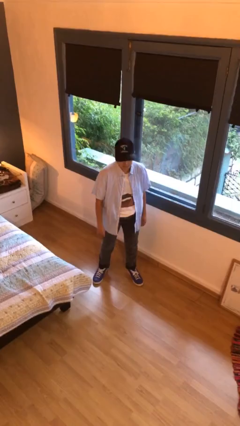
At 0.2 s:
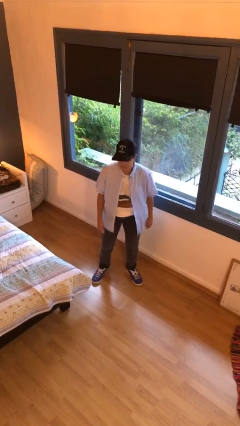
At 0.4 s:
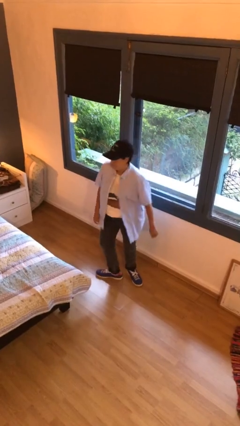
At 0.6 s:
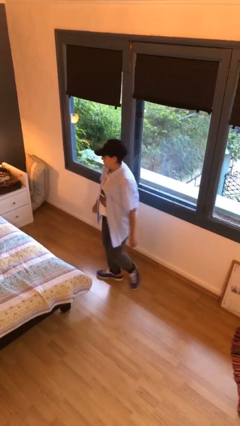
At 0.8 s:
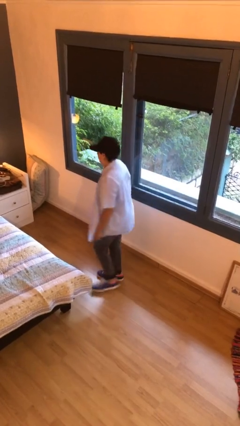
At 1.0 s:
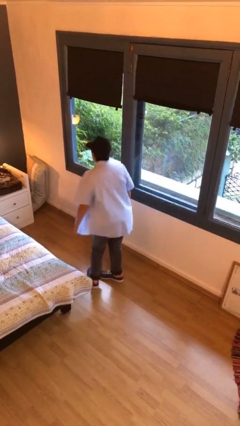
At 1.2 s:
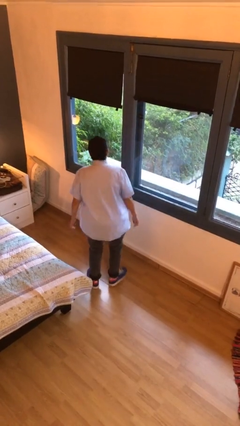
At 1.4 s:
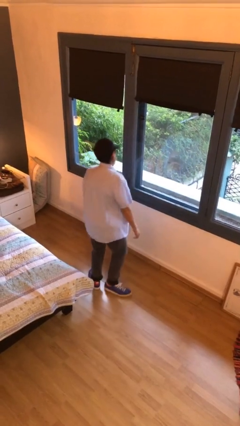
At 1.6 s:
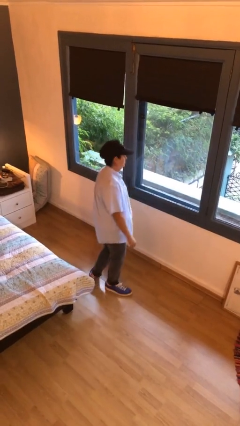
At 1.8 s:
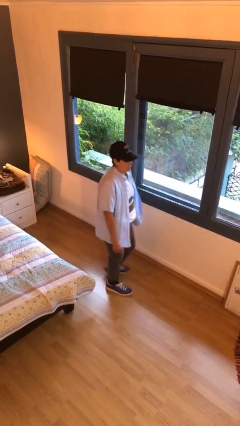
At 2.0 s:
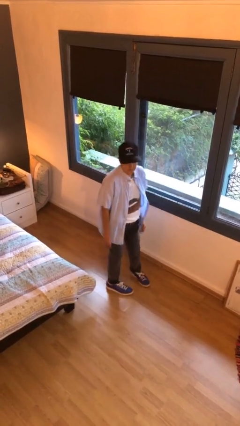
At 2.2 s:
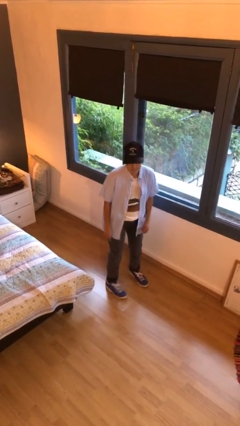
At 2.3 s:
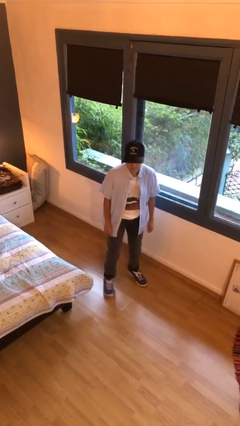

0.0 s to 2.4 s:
person twirls

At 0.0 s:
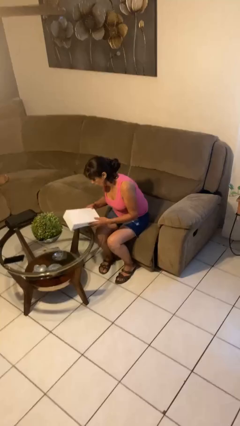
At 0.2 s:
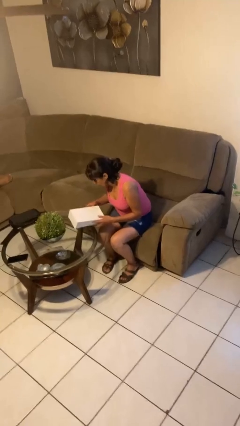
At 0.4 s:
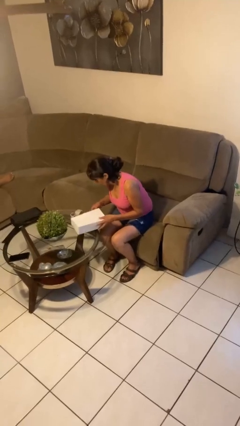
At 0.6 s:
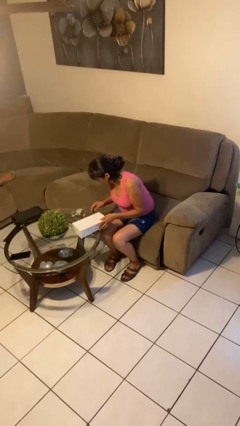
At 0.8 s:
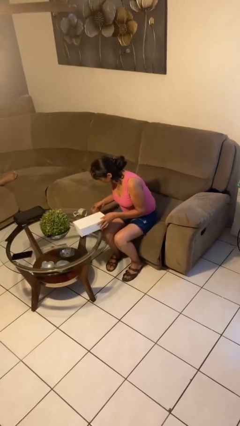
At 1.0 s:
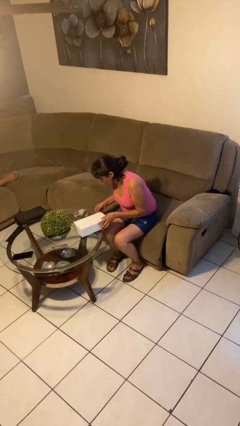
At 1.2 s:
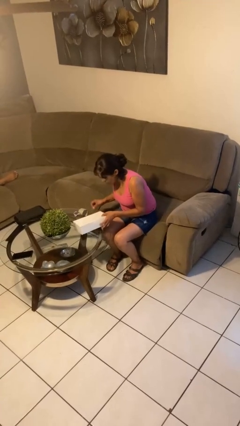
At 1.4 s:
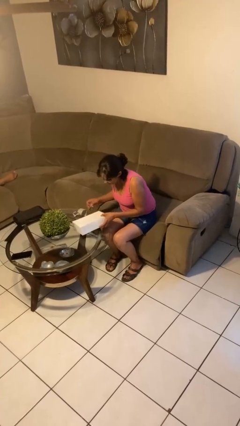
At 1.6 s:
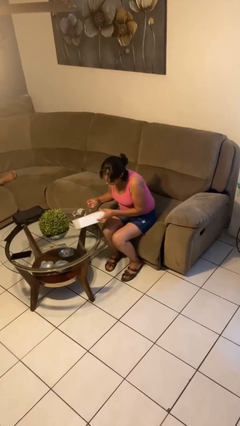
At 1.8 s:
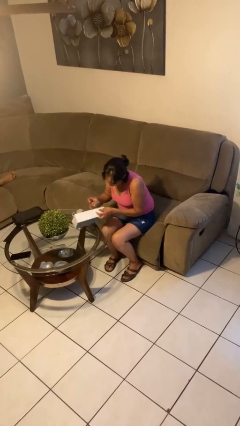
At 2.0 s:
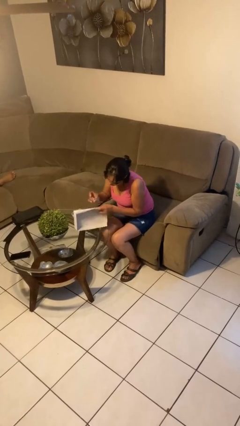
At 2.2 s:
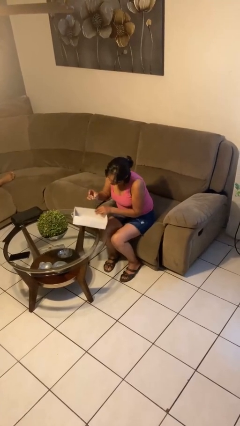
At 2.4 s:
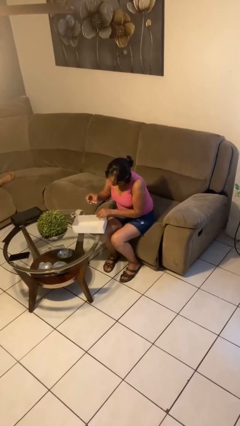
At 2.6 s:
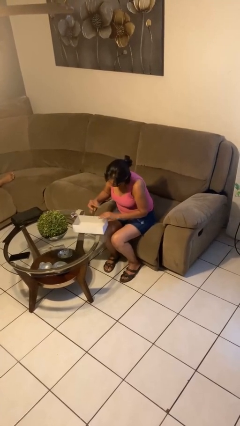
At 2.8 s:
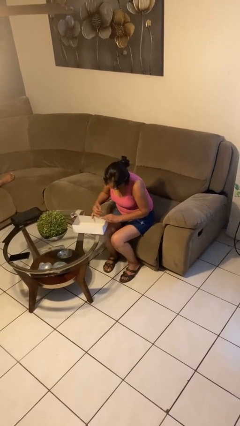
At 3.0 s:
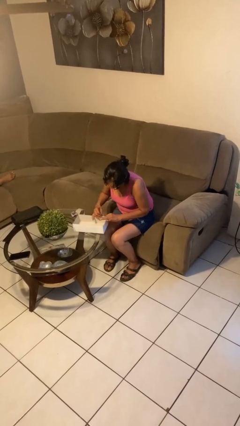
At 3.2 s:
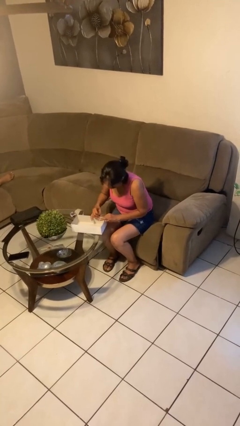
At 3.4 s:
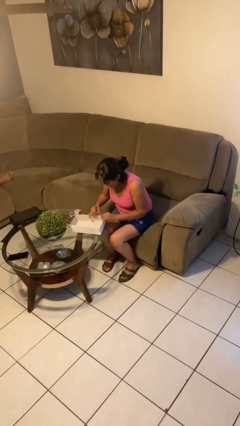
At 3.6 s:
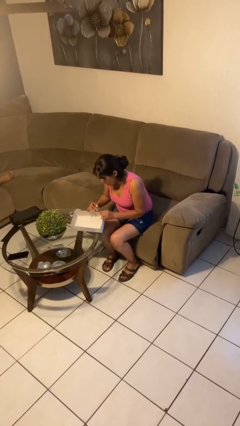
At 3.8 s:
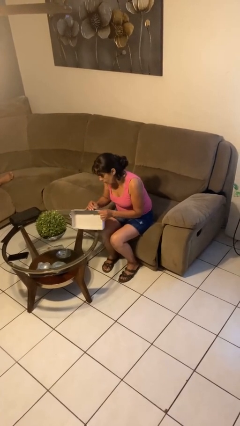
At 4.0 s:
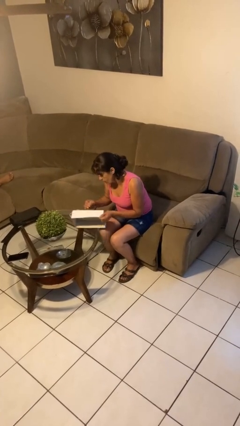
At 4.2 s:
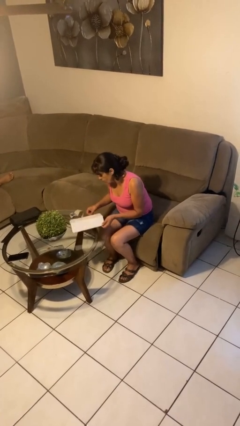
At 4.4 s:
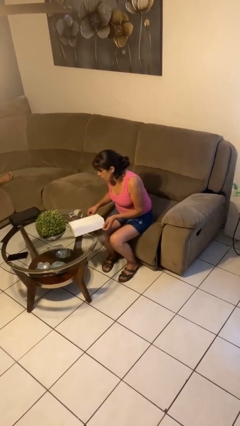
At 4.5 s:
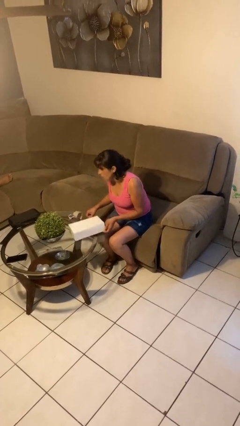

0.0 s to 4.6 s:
person wraps box

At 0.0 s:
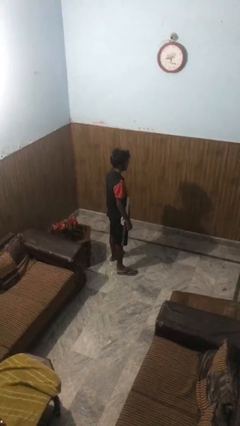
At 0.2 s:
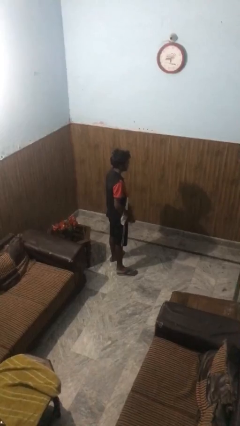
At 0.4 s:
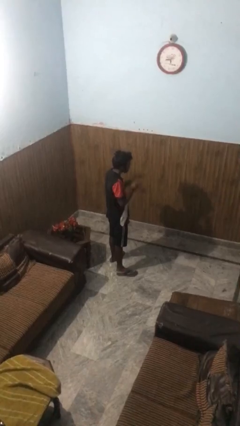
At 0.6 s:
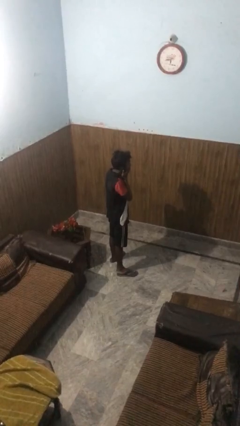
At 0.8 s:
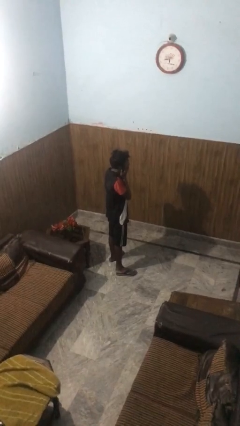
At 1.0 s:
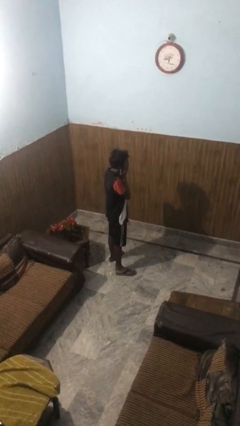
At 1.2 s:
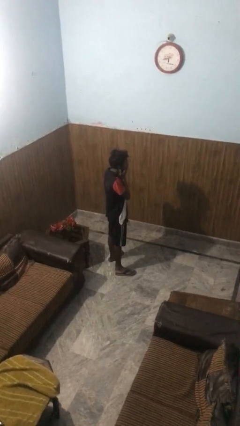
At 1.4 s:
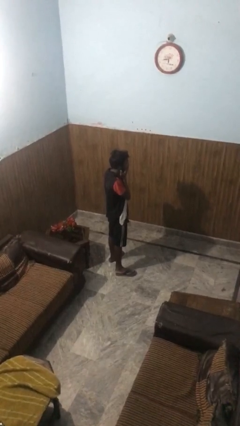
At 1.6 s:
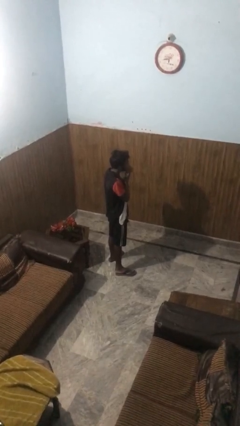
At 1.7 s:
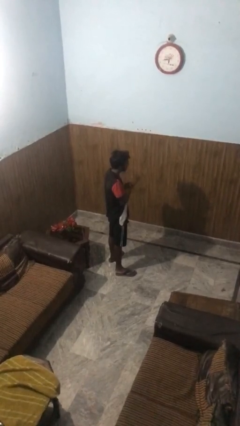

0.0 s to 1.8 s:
person covers face with hands

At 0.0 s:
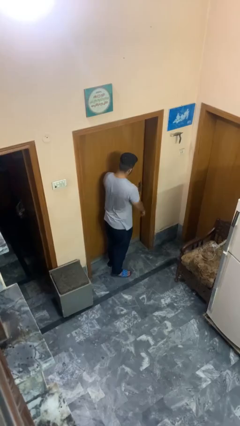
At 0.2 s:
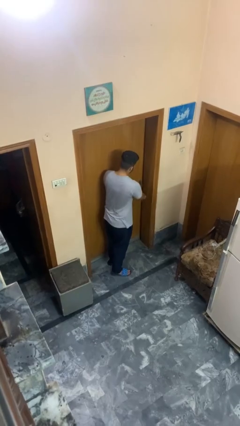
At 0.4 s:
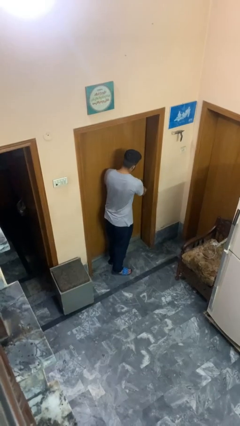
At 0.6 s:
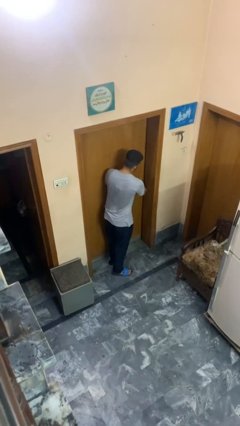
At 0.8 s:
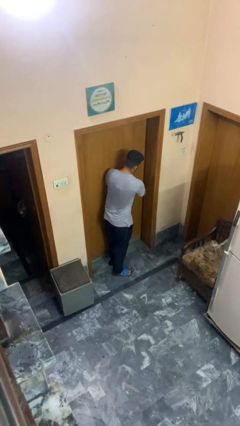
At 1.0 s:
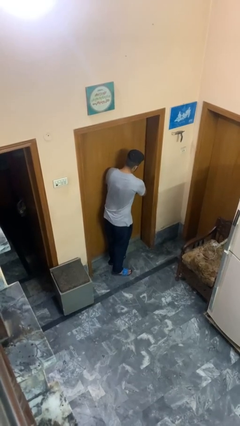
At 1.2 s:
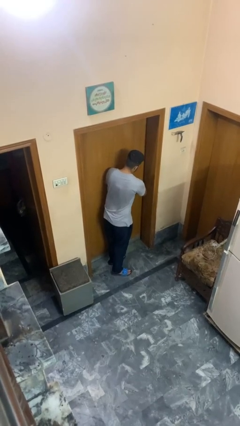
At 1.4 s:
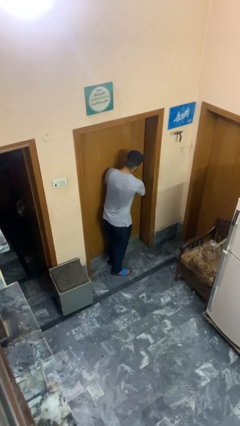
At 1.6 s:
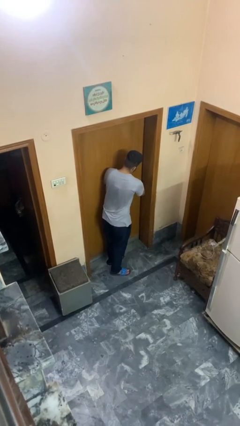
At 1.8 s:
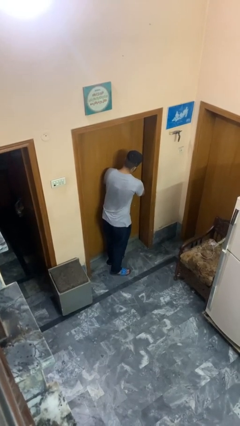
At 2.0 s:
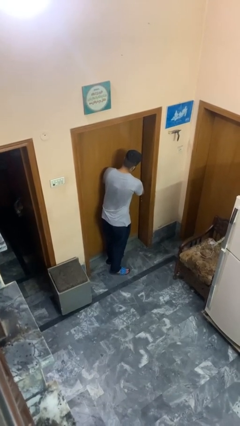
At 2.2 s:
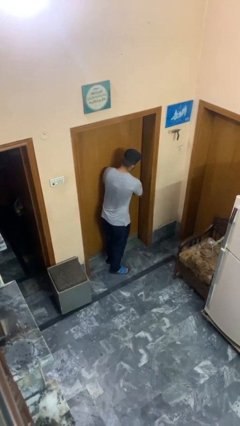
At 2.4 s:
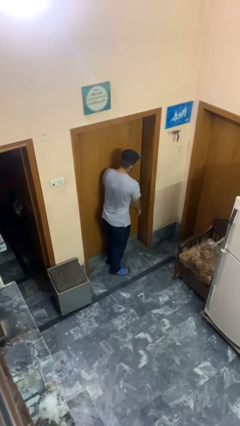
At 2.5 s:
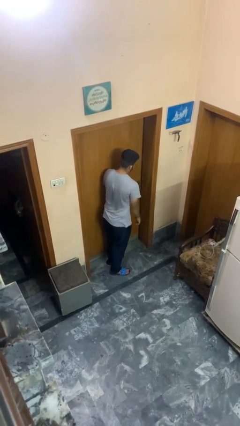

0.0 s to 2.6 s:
person locks door with keys

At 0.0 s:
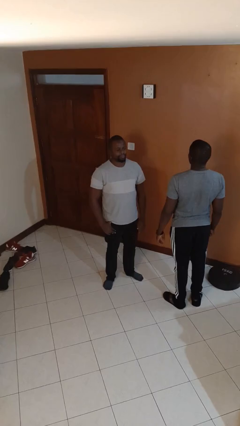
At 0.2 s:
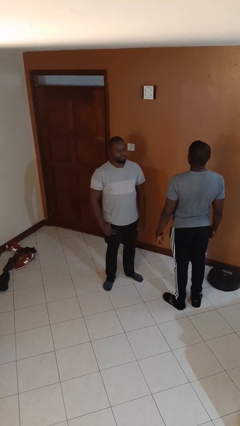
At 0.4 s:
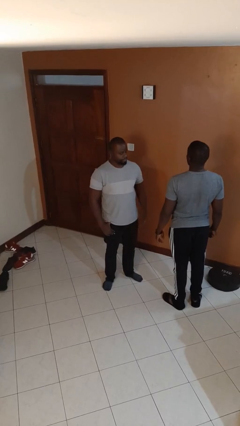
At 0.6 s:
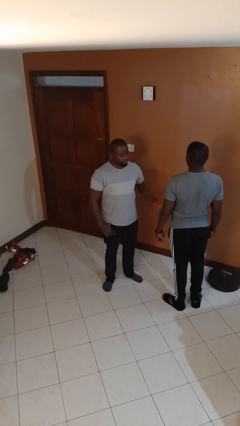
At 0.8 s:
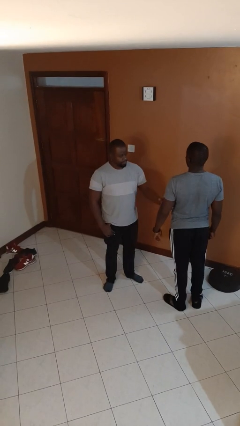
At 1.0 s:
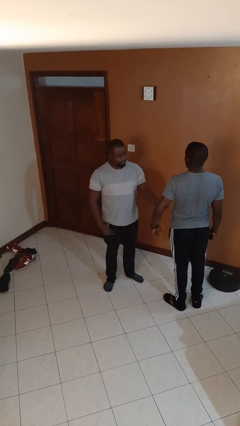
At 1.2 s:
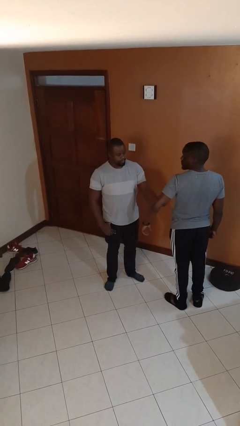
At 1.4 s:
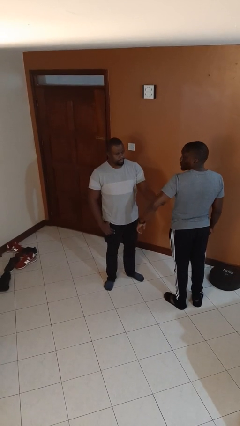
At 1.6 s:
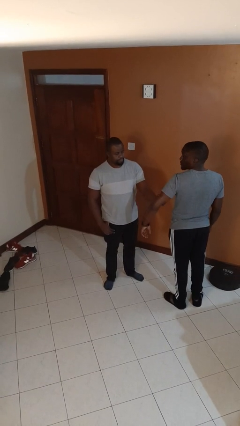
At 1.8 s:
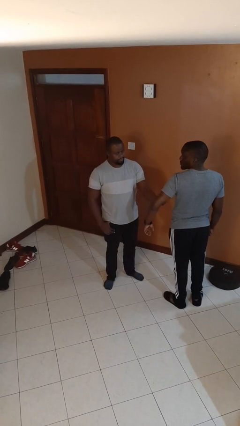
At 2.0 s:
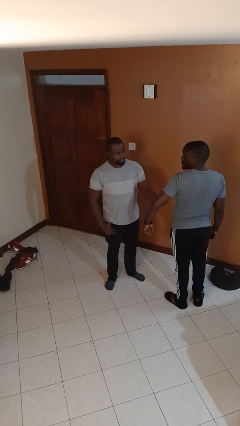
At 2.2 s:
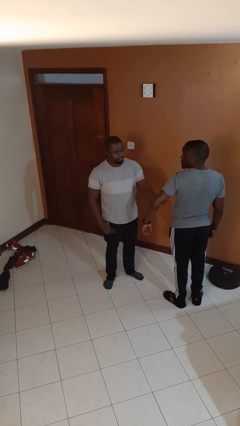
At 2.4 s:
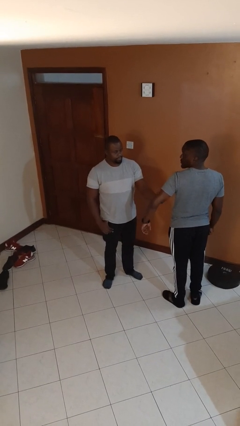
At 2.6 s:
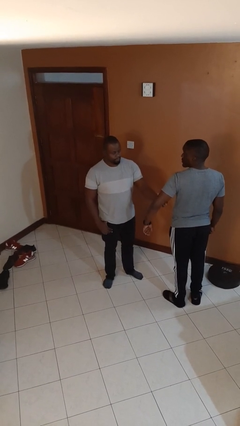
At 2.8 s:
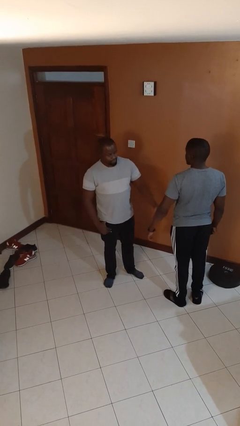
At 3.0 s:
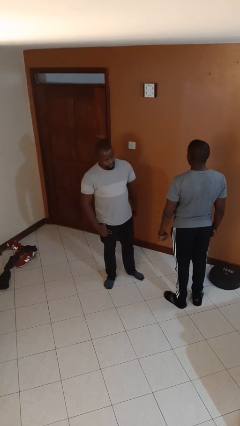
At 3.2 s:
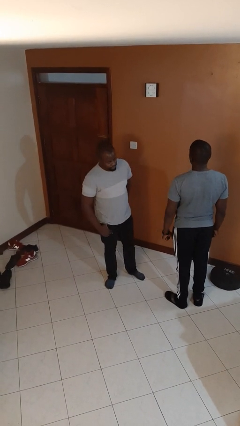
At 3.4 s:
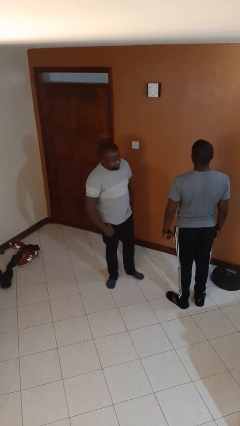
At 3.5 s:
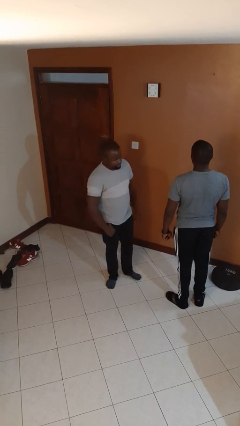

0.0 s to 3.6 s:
person grabs person by bicep

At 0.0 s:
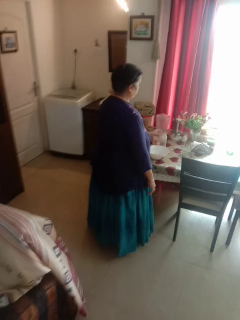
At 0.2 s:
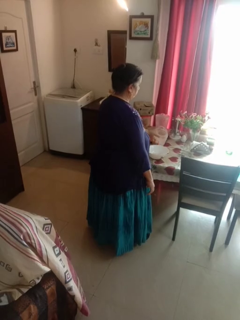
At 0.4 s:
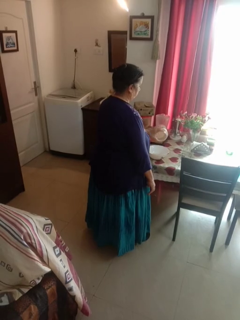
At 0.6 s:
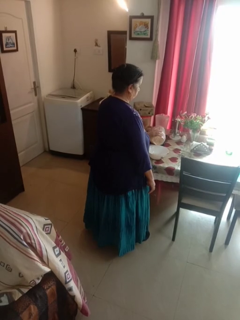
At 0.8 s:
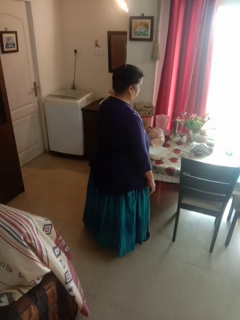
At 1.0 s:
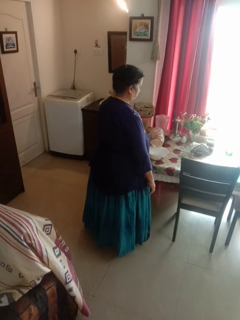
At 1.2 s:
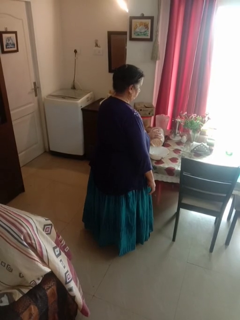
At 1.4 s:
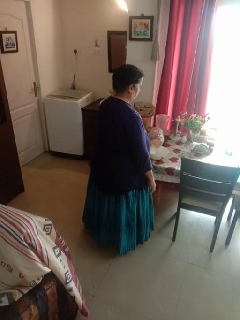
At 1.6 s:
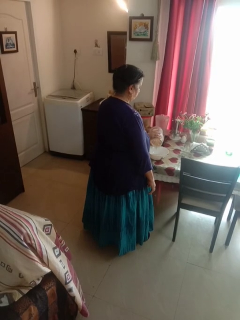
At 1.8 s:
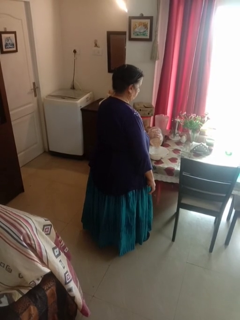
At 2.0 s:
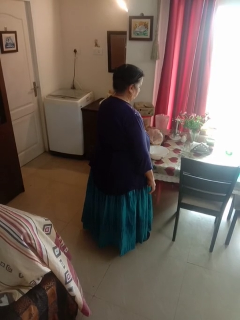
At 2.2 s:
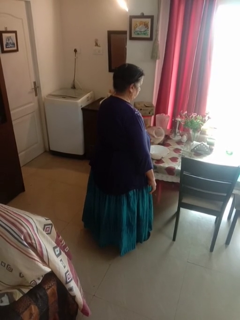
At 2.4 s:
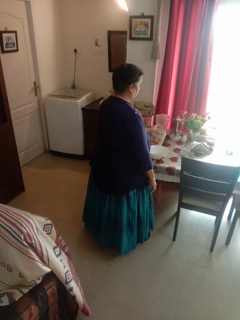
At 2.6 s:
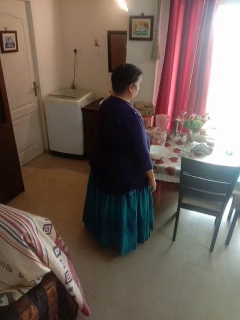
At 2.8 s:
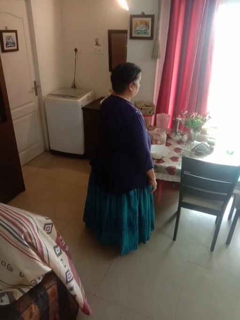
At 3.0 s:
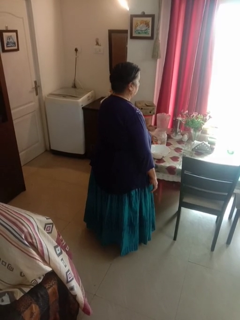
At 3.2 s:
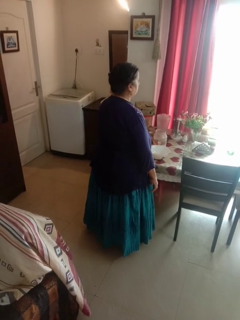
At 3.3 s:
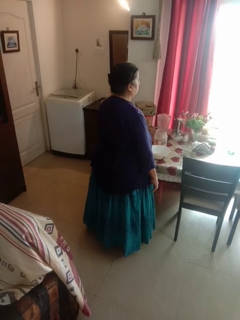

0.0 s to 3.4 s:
person pours into bowl
